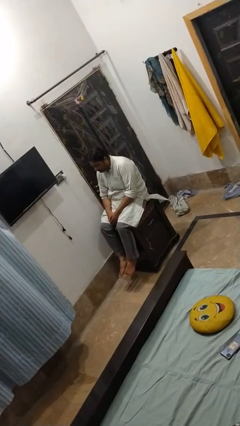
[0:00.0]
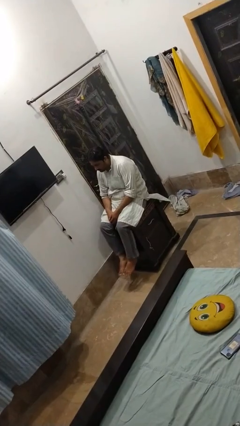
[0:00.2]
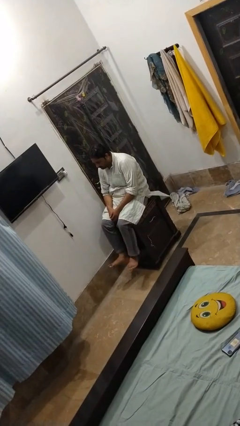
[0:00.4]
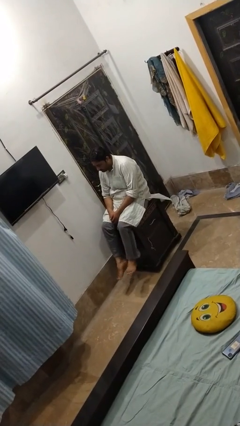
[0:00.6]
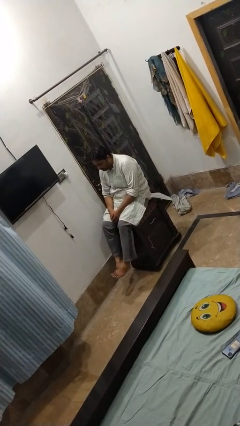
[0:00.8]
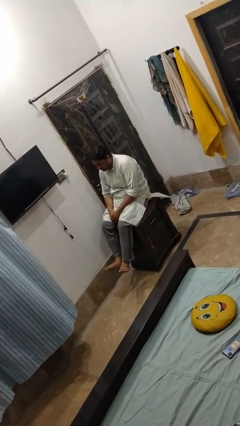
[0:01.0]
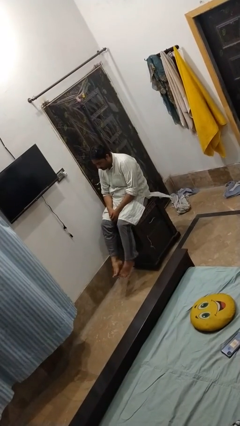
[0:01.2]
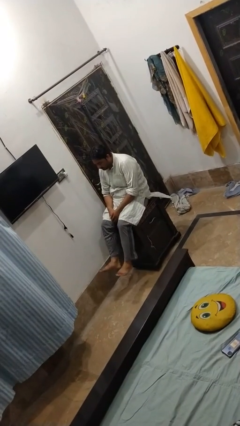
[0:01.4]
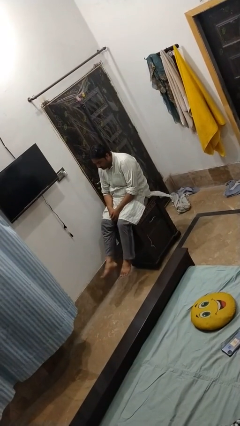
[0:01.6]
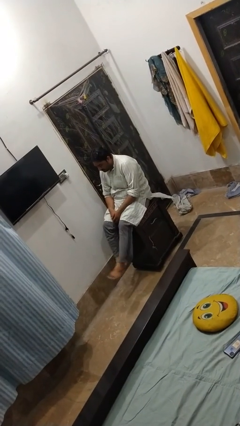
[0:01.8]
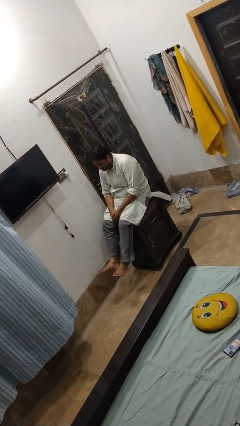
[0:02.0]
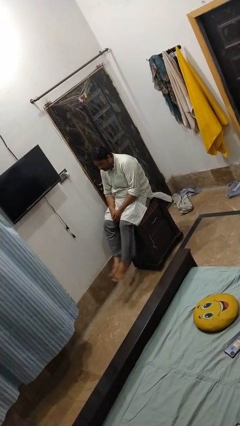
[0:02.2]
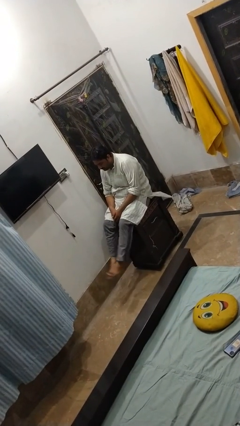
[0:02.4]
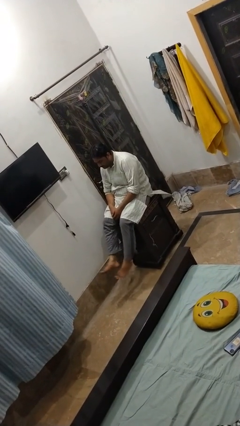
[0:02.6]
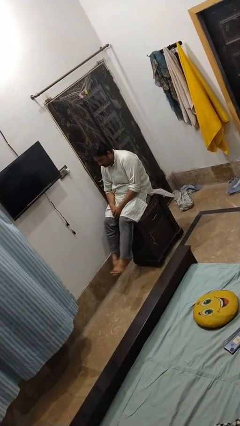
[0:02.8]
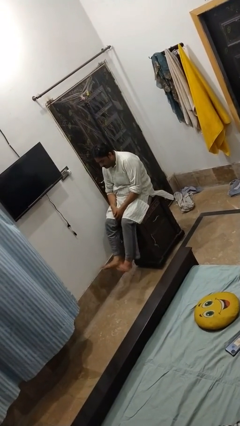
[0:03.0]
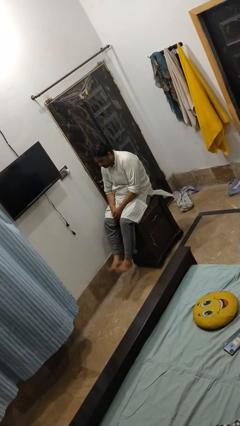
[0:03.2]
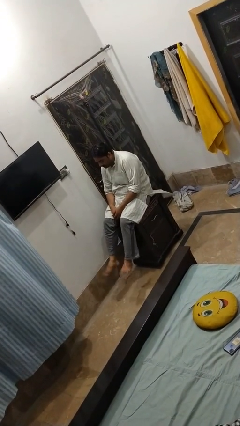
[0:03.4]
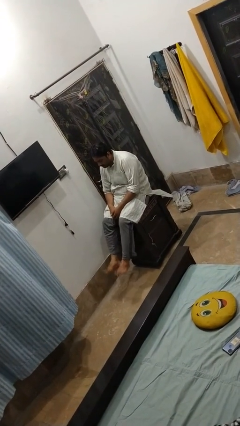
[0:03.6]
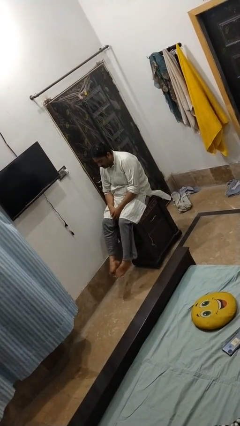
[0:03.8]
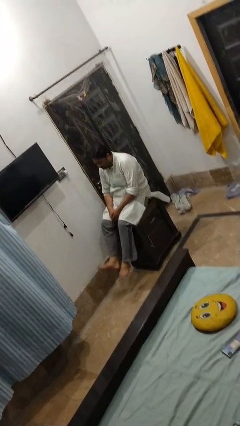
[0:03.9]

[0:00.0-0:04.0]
person twirls

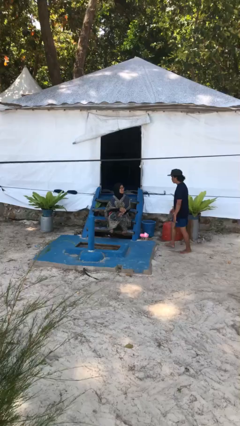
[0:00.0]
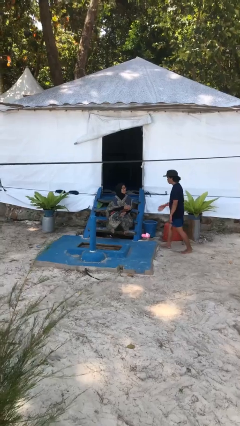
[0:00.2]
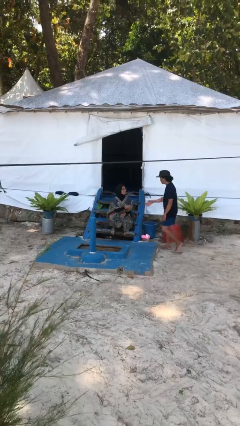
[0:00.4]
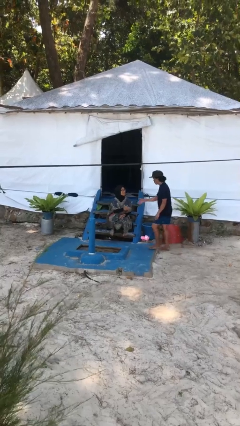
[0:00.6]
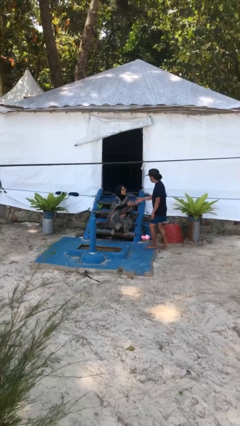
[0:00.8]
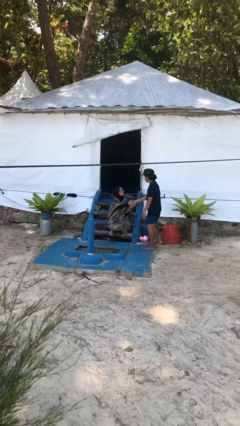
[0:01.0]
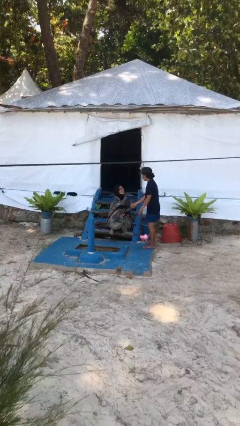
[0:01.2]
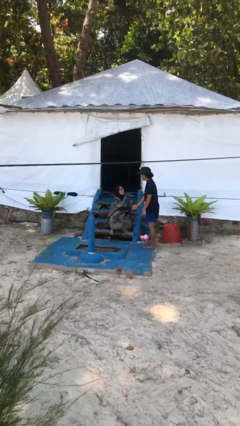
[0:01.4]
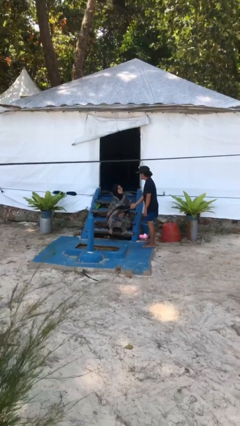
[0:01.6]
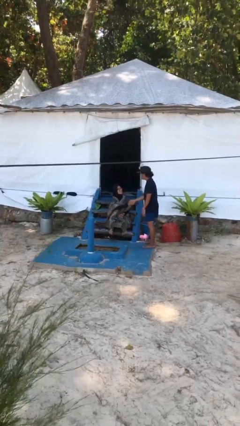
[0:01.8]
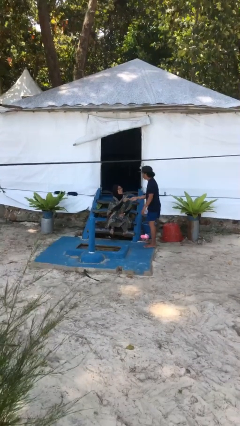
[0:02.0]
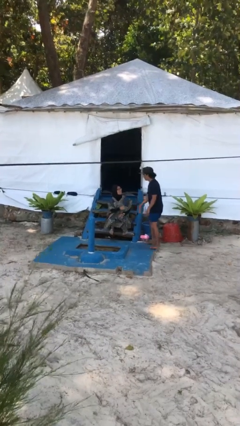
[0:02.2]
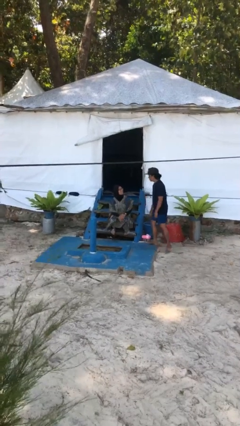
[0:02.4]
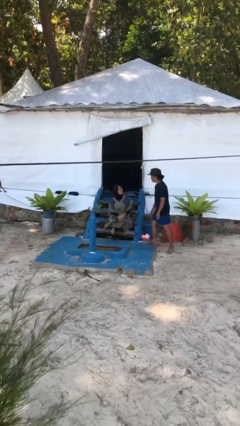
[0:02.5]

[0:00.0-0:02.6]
person shakes hand

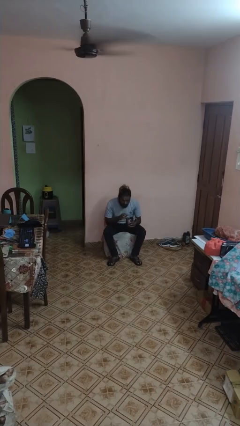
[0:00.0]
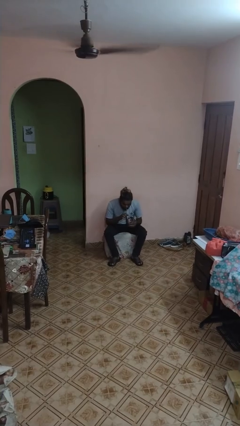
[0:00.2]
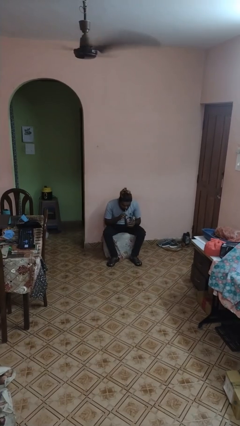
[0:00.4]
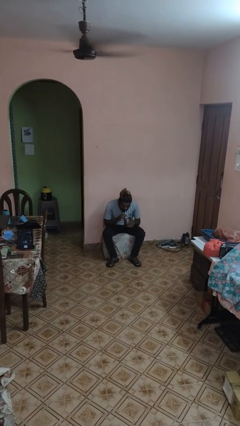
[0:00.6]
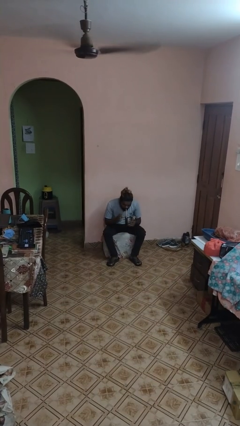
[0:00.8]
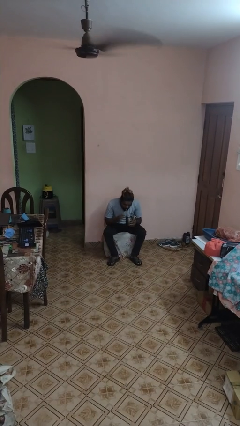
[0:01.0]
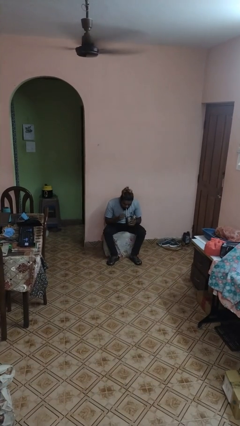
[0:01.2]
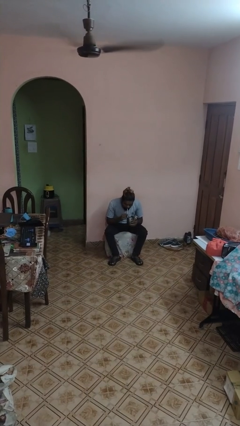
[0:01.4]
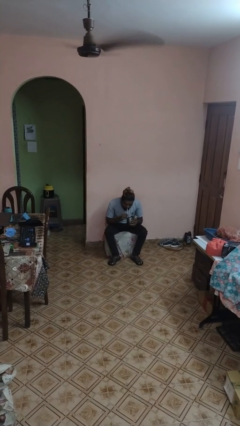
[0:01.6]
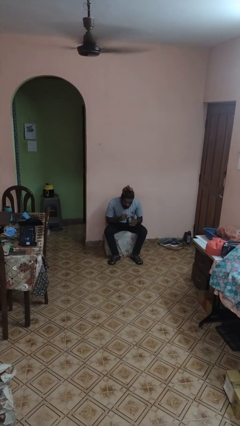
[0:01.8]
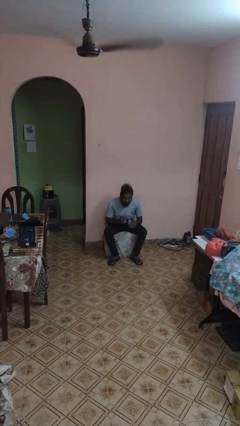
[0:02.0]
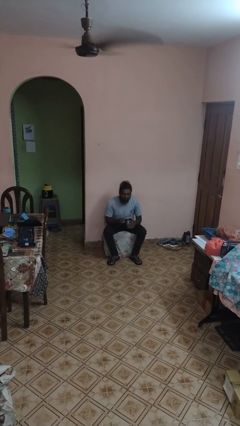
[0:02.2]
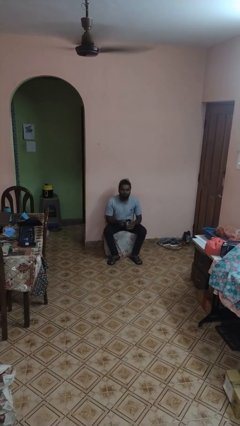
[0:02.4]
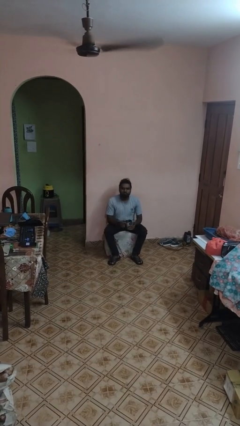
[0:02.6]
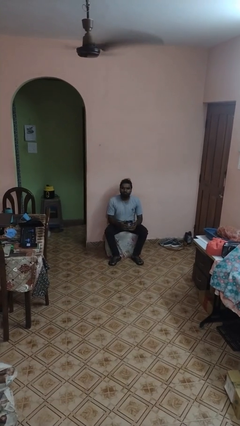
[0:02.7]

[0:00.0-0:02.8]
person drinks from straw

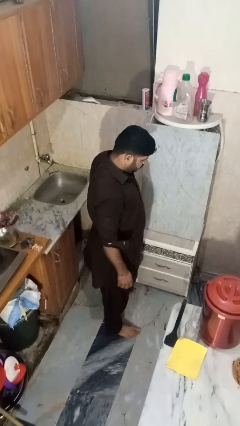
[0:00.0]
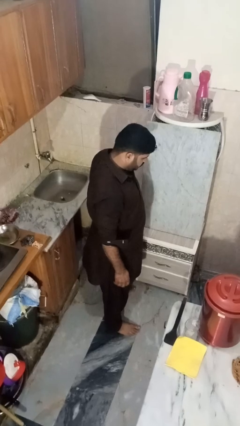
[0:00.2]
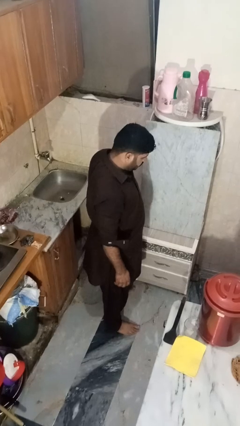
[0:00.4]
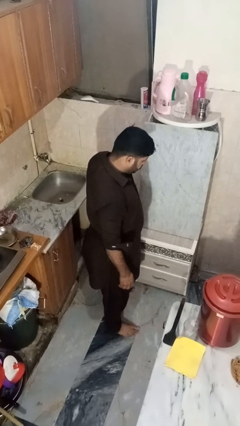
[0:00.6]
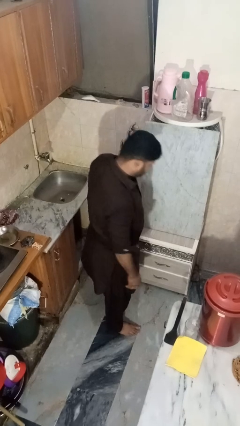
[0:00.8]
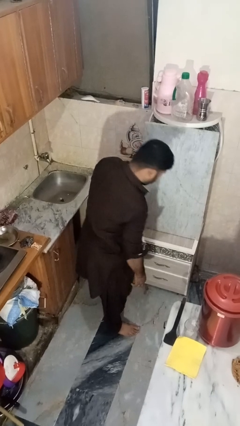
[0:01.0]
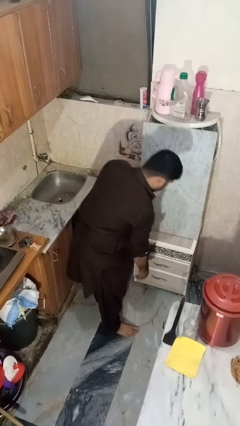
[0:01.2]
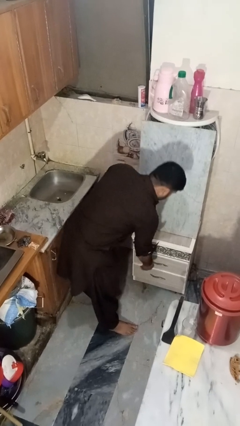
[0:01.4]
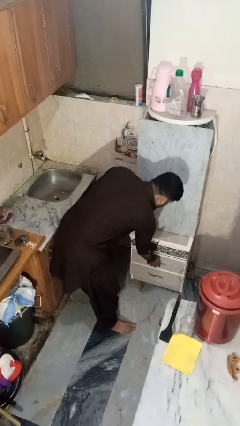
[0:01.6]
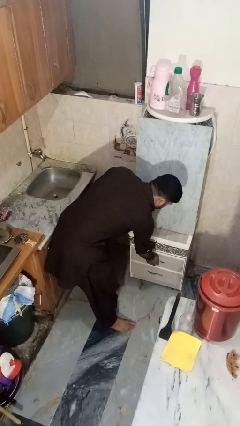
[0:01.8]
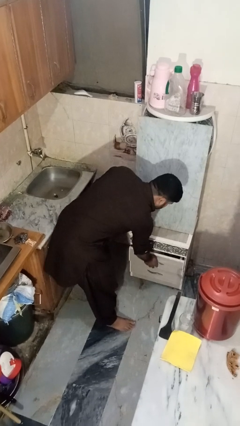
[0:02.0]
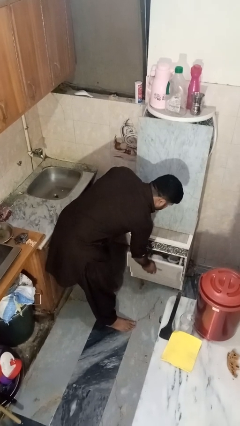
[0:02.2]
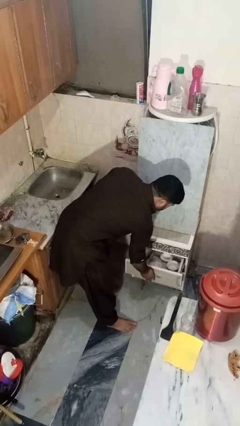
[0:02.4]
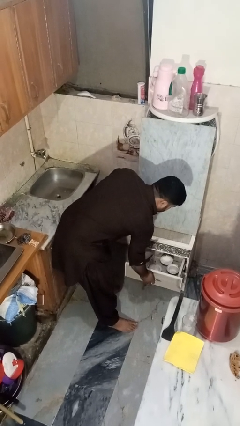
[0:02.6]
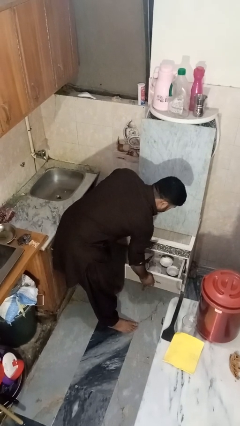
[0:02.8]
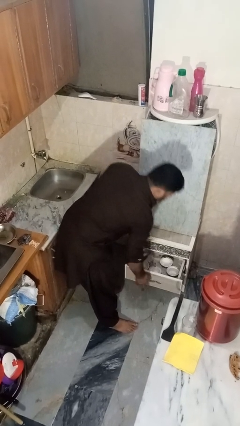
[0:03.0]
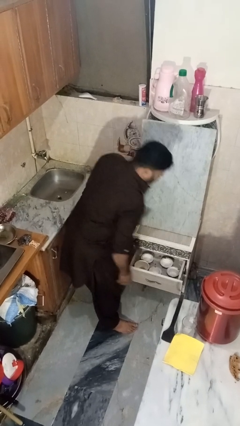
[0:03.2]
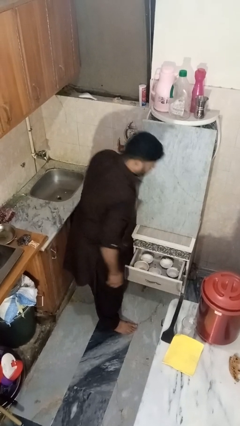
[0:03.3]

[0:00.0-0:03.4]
person opens kitchen drawer

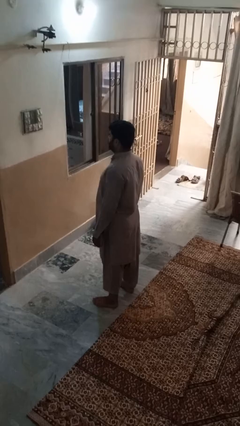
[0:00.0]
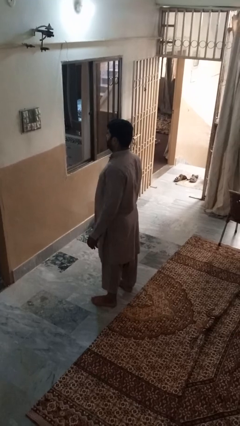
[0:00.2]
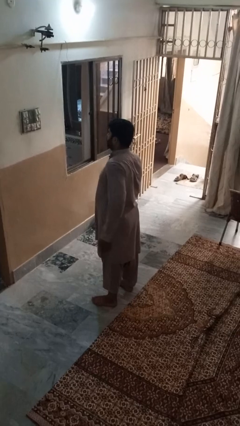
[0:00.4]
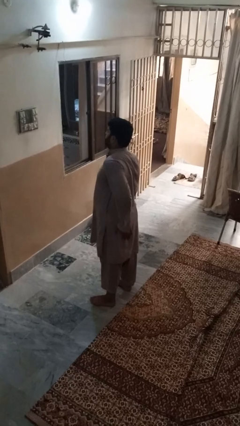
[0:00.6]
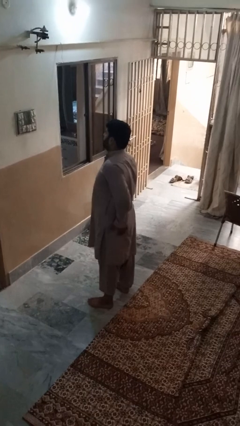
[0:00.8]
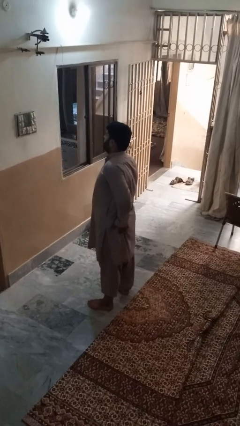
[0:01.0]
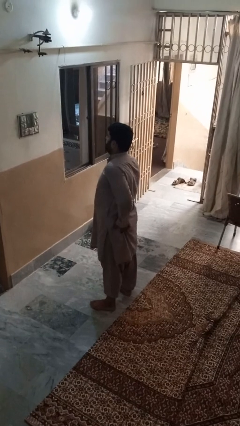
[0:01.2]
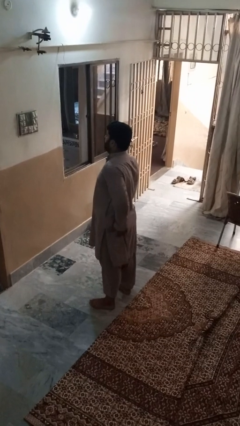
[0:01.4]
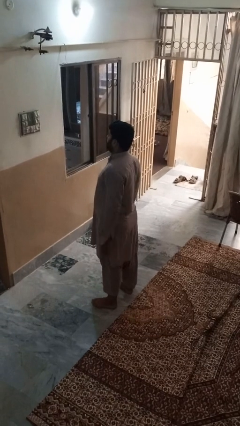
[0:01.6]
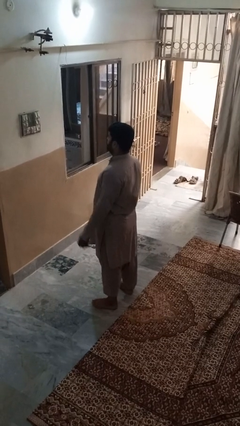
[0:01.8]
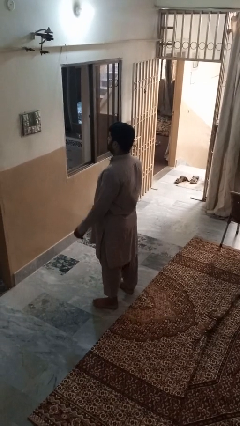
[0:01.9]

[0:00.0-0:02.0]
person wiggles hips

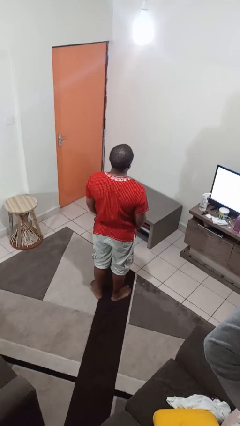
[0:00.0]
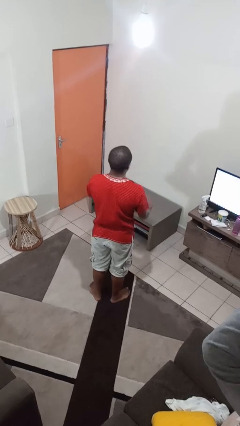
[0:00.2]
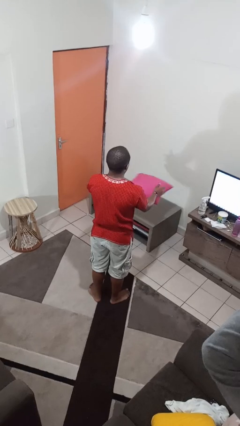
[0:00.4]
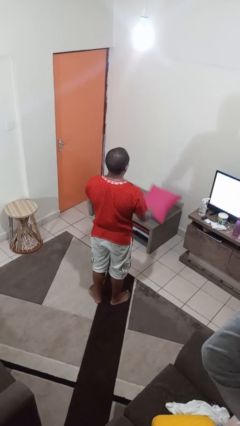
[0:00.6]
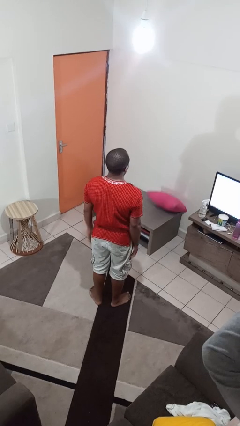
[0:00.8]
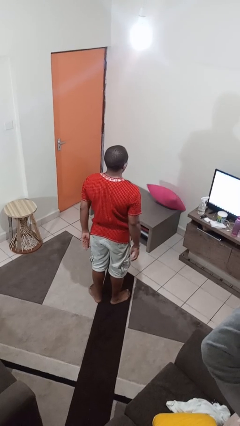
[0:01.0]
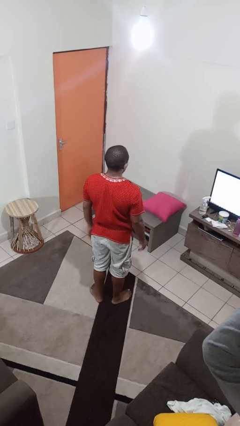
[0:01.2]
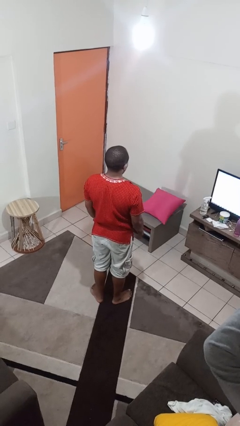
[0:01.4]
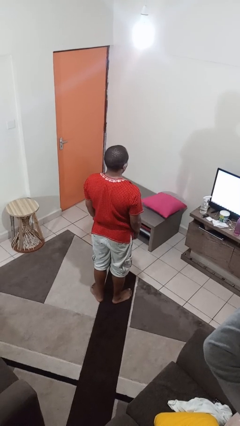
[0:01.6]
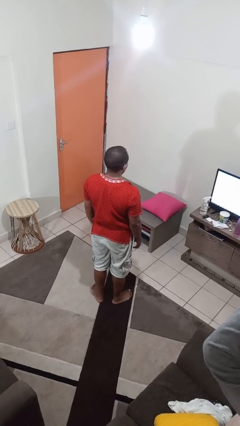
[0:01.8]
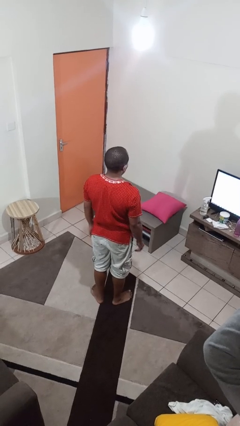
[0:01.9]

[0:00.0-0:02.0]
person throws object on table

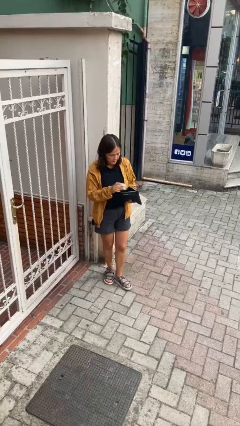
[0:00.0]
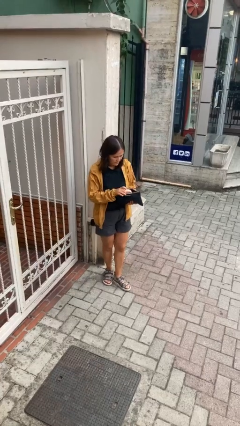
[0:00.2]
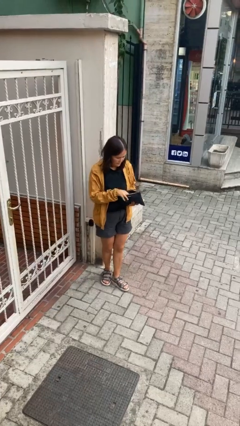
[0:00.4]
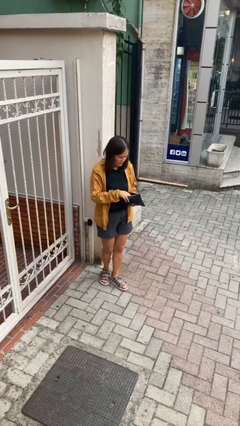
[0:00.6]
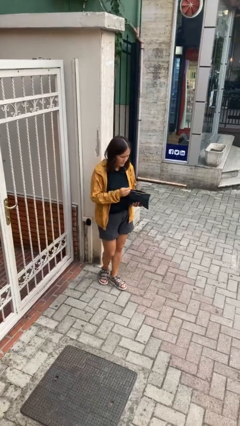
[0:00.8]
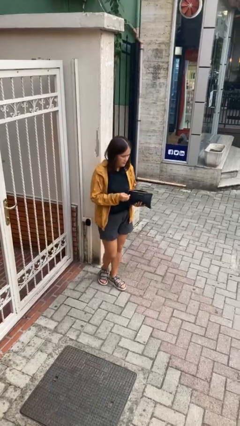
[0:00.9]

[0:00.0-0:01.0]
person puts object into purse
